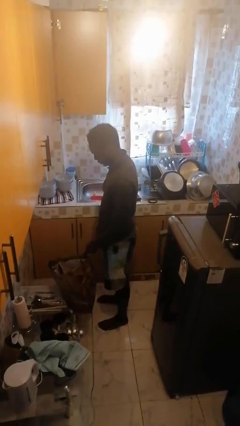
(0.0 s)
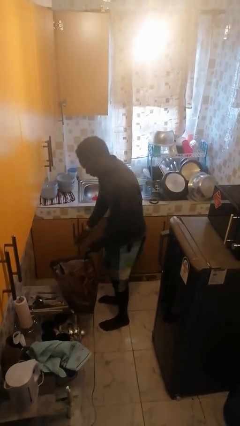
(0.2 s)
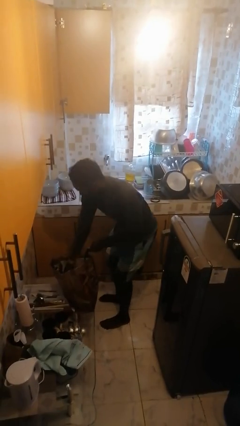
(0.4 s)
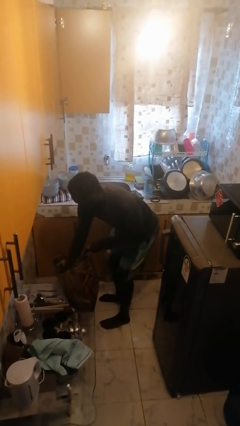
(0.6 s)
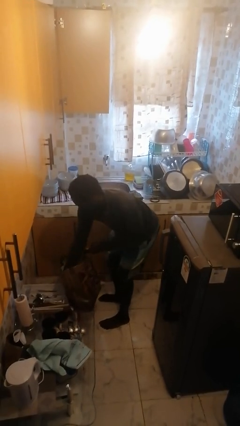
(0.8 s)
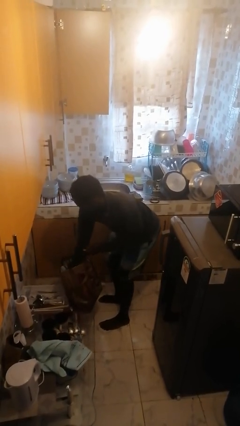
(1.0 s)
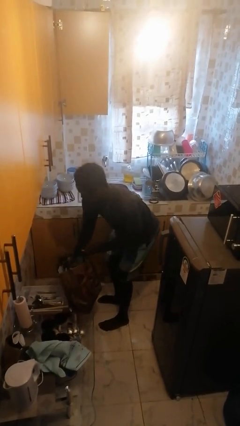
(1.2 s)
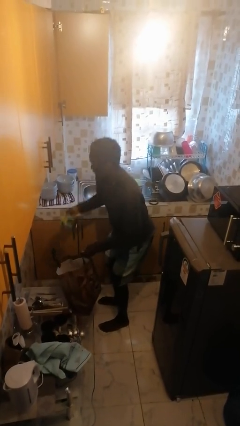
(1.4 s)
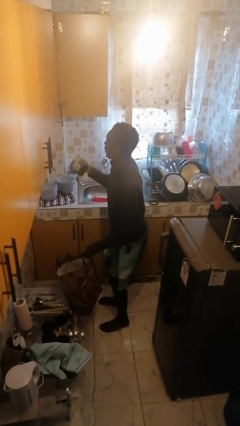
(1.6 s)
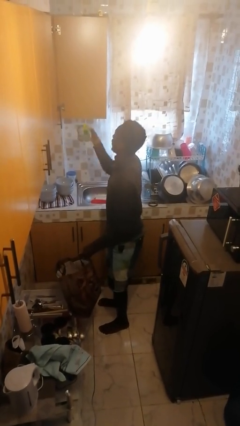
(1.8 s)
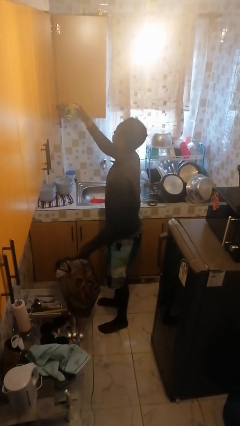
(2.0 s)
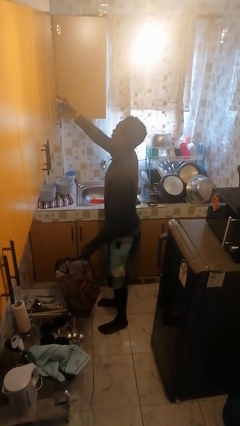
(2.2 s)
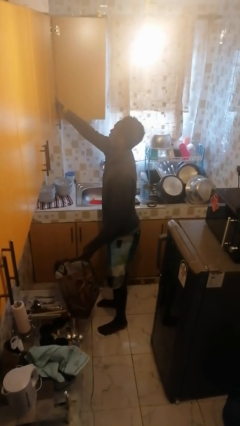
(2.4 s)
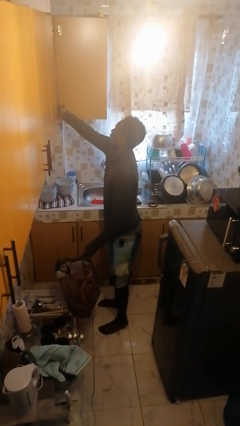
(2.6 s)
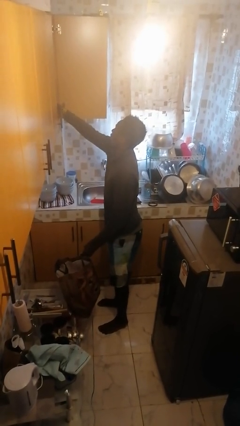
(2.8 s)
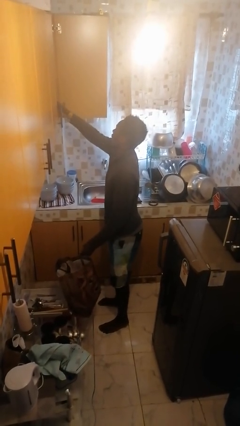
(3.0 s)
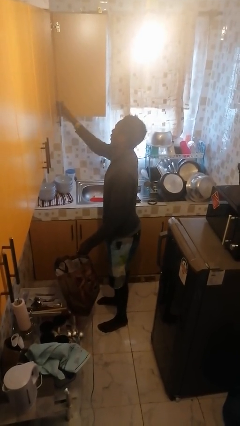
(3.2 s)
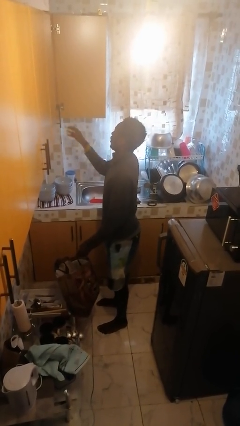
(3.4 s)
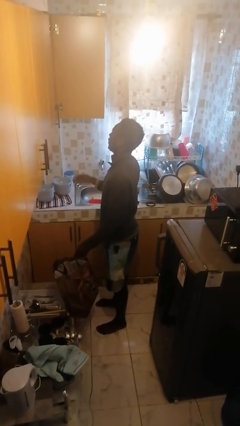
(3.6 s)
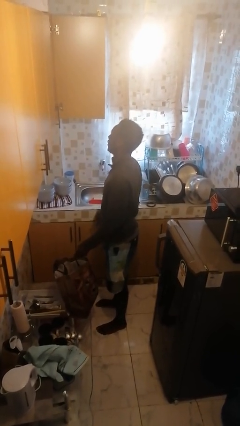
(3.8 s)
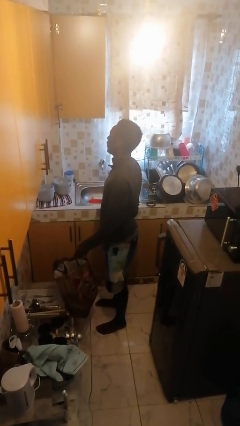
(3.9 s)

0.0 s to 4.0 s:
person loads groceries into cabinet

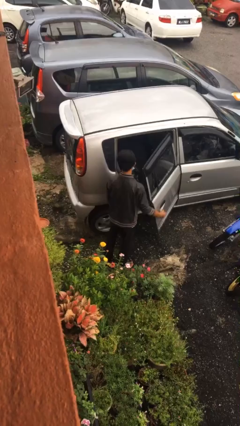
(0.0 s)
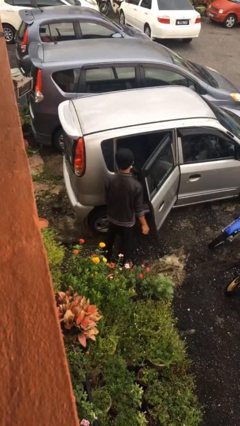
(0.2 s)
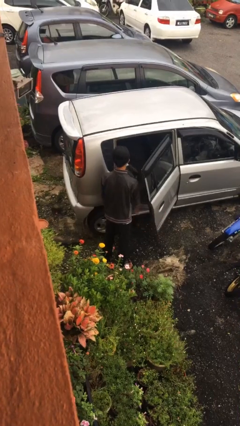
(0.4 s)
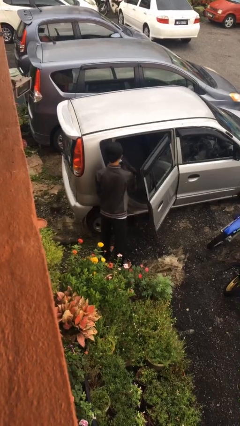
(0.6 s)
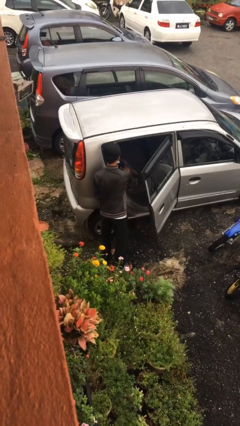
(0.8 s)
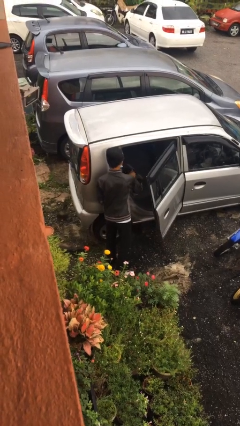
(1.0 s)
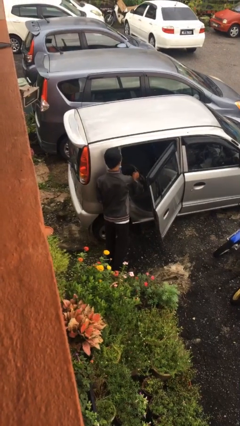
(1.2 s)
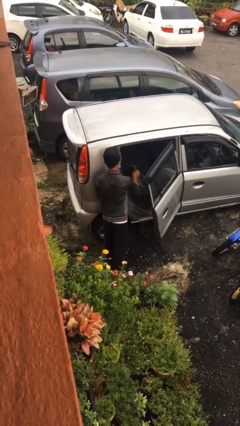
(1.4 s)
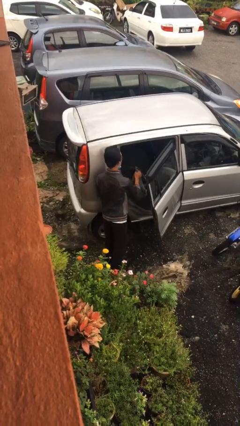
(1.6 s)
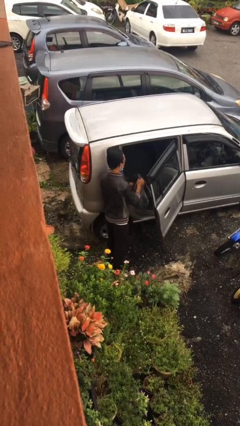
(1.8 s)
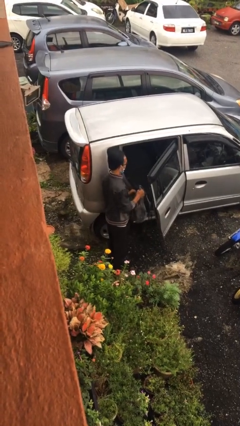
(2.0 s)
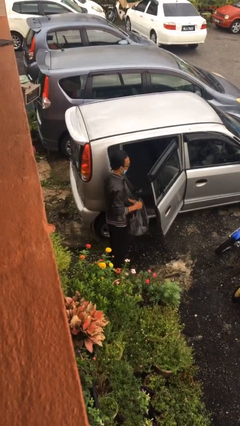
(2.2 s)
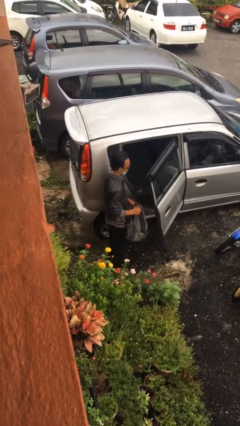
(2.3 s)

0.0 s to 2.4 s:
person unloads car

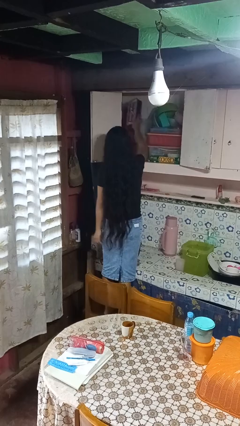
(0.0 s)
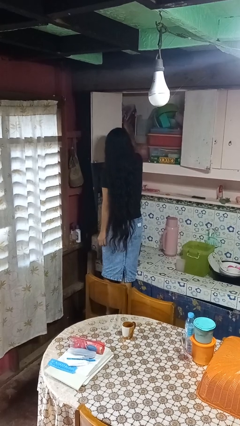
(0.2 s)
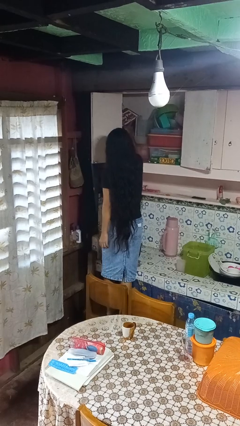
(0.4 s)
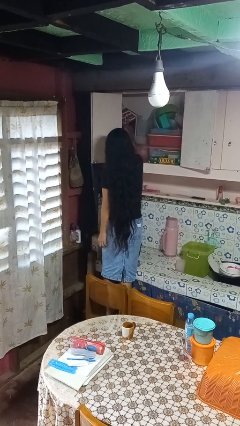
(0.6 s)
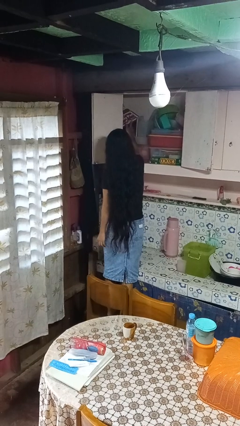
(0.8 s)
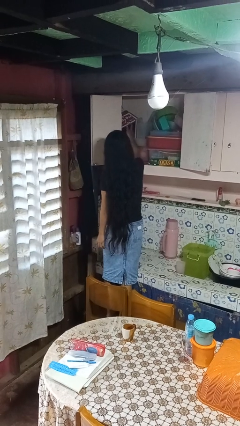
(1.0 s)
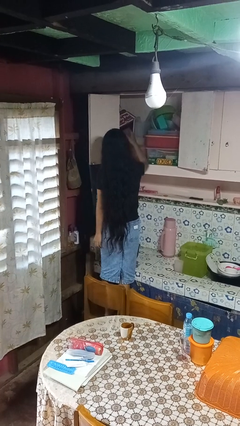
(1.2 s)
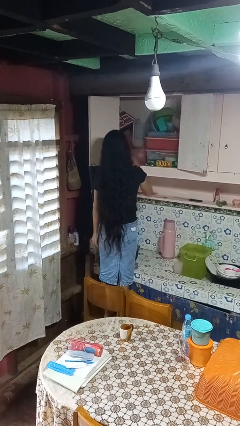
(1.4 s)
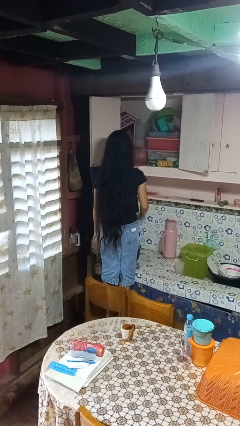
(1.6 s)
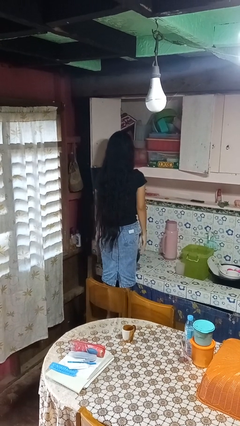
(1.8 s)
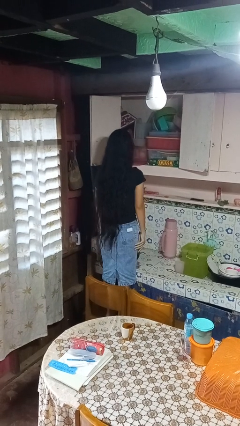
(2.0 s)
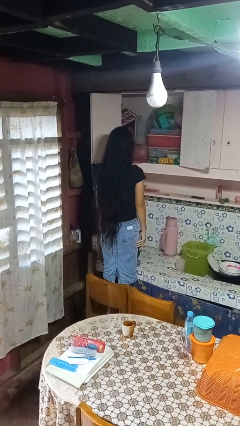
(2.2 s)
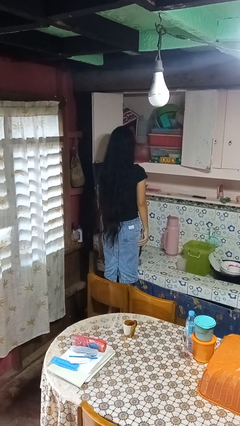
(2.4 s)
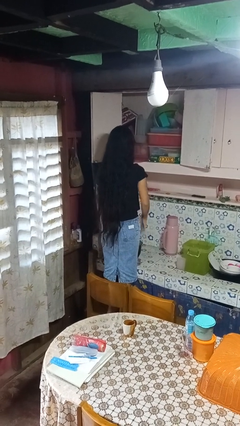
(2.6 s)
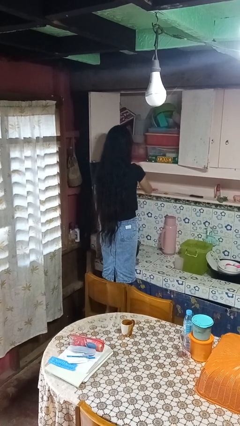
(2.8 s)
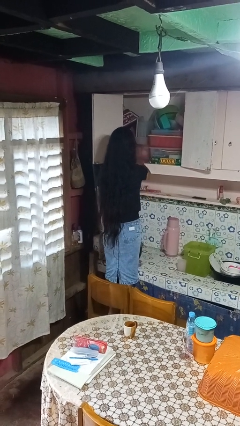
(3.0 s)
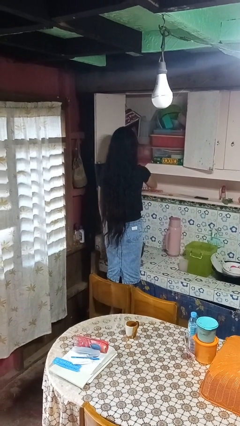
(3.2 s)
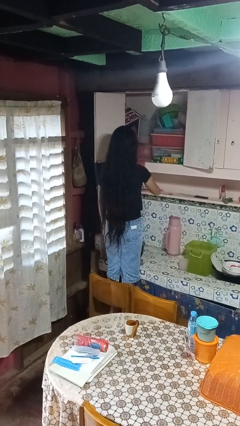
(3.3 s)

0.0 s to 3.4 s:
person puts object in cabinet

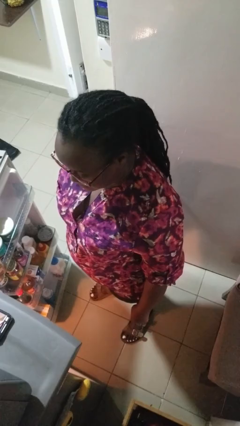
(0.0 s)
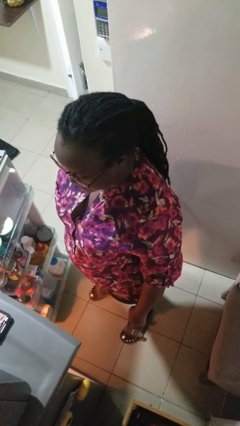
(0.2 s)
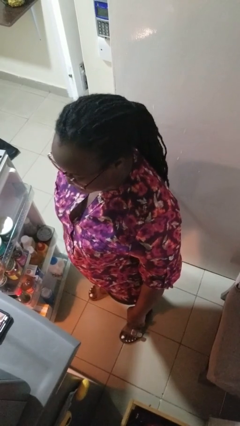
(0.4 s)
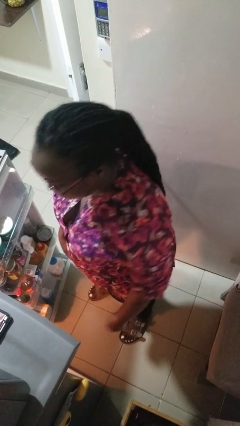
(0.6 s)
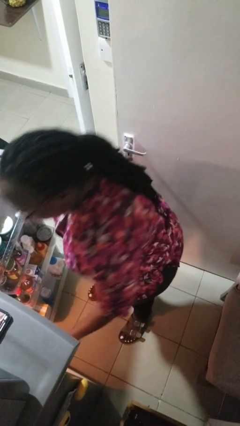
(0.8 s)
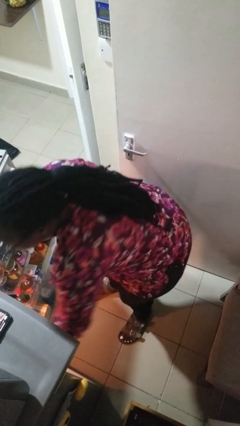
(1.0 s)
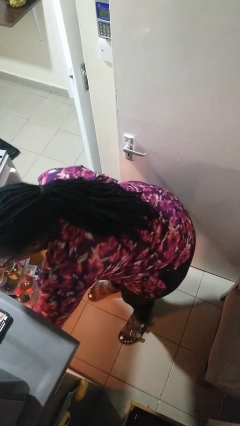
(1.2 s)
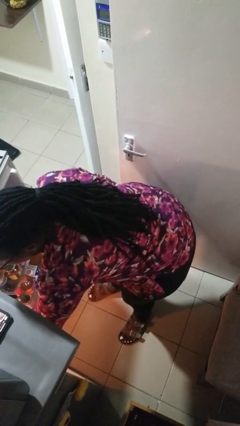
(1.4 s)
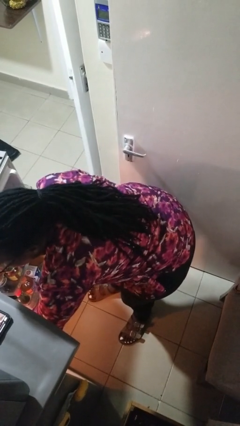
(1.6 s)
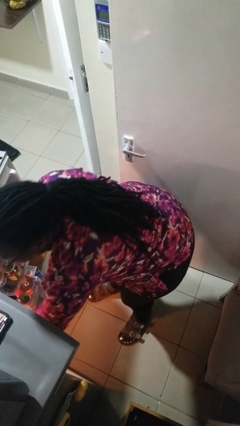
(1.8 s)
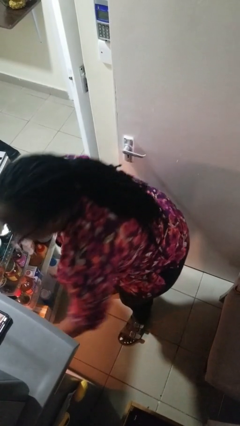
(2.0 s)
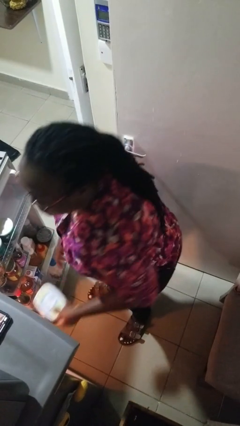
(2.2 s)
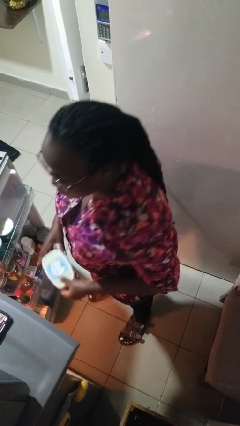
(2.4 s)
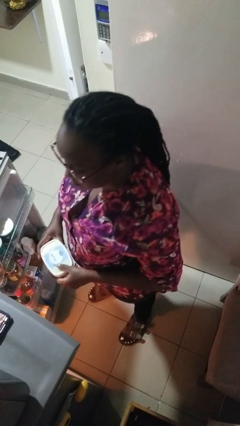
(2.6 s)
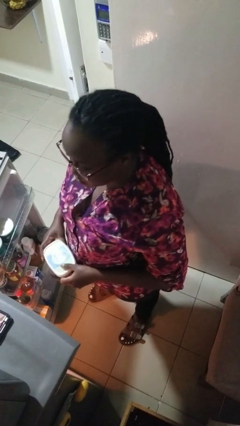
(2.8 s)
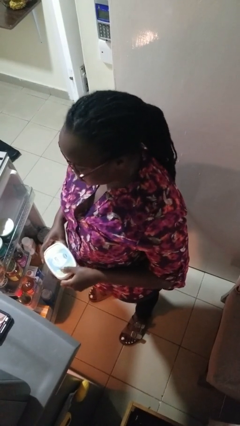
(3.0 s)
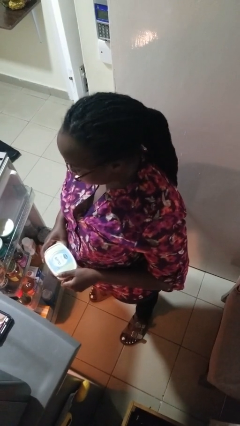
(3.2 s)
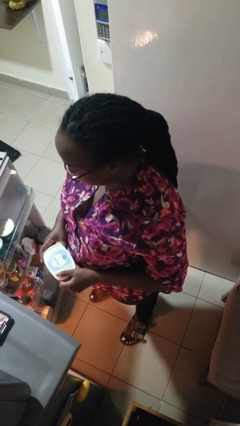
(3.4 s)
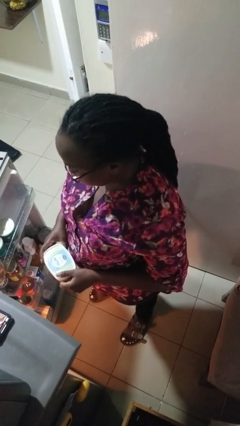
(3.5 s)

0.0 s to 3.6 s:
person takes object from refrigerator

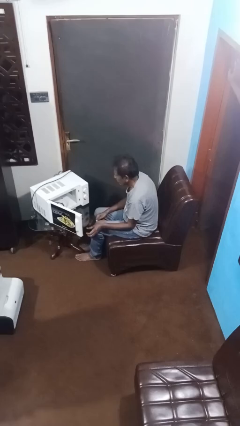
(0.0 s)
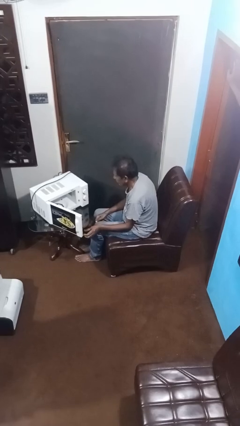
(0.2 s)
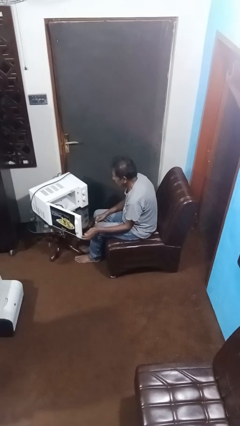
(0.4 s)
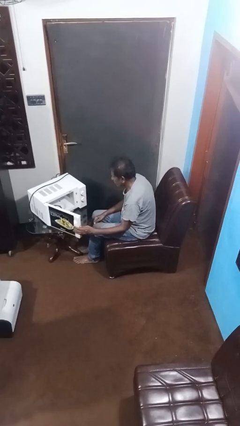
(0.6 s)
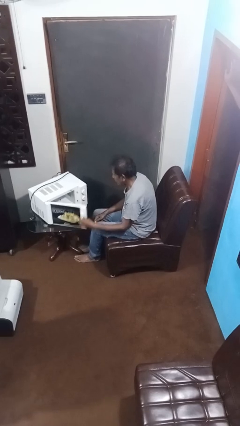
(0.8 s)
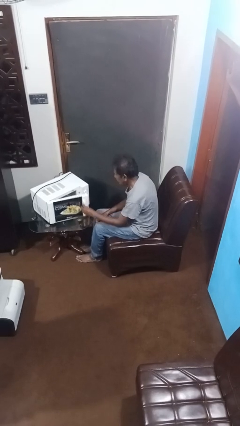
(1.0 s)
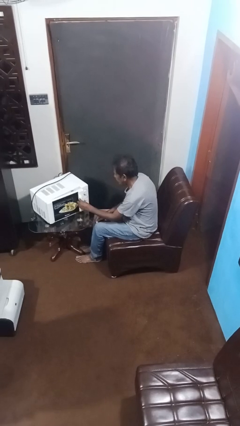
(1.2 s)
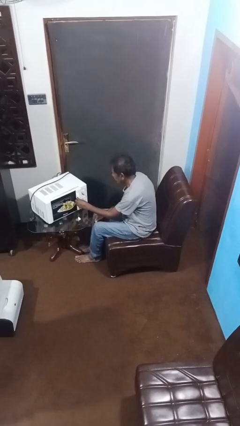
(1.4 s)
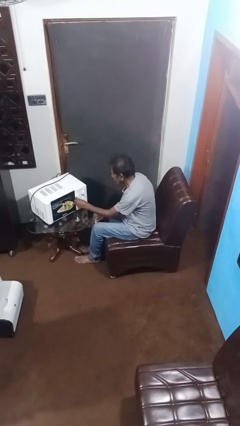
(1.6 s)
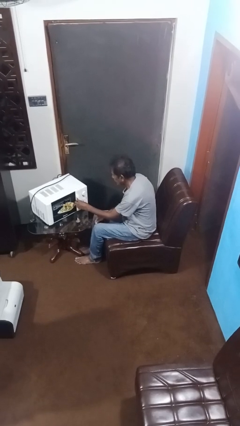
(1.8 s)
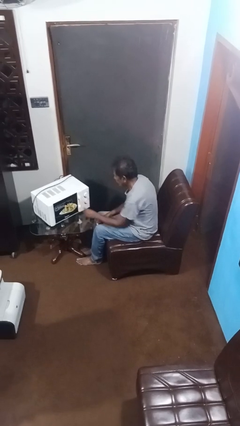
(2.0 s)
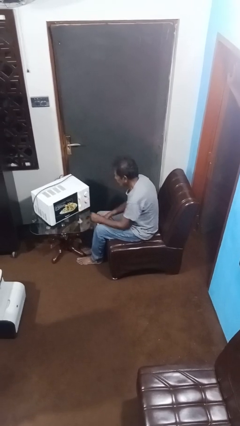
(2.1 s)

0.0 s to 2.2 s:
person closes microwave

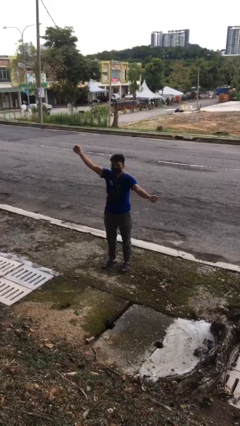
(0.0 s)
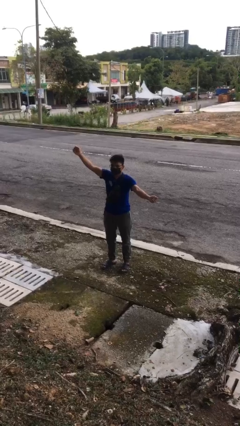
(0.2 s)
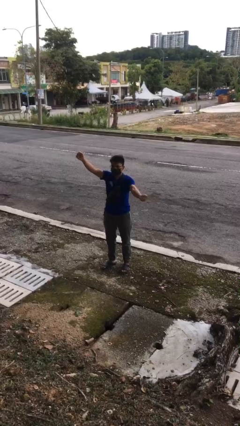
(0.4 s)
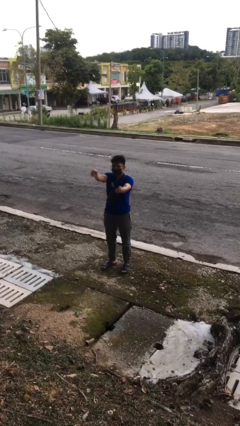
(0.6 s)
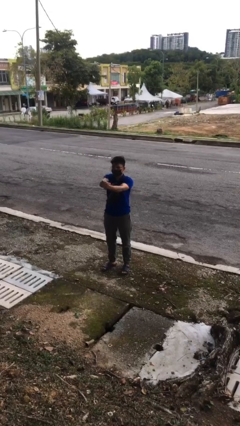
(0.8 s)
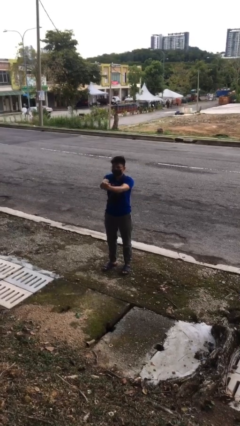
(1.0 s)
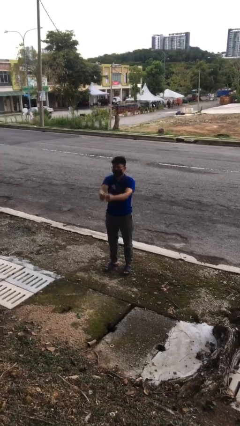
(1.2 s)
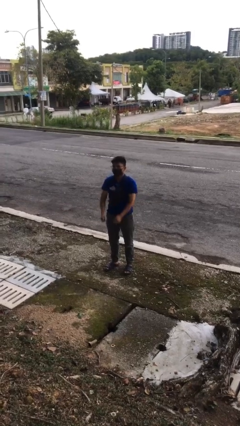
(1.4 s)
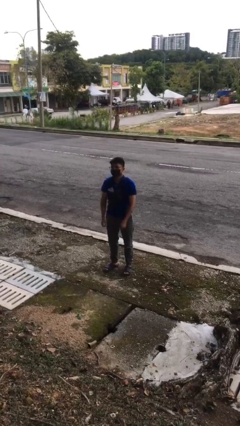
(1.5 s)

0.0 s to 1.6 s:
person gestures zoom out
